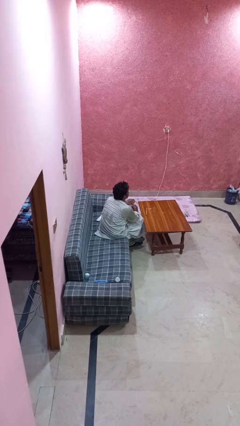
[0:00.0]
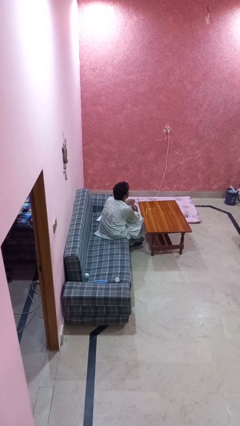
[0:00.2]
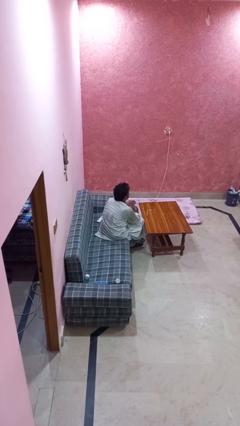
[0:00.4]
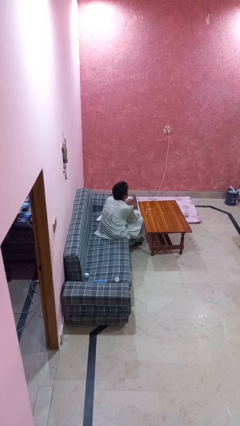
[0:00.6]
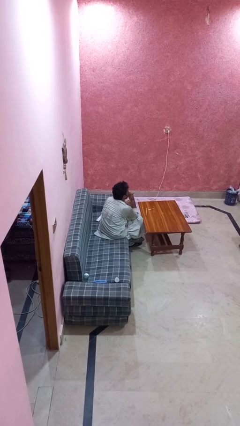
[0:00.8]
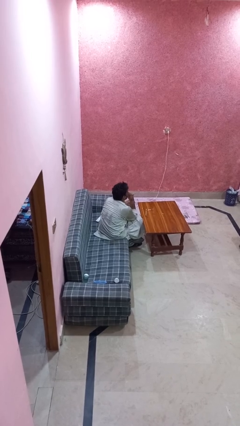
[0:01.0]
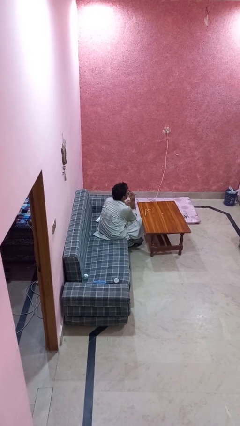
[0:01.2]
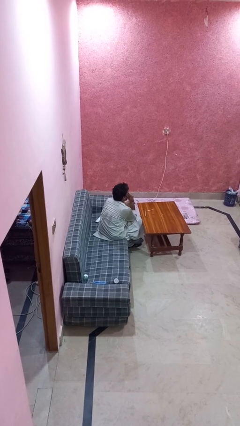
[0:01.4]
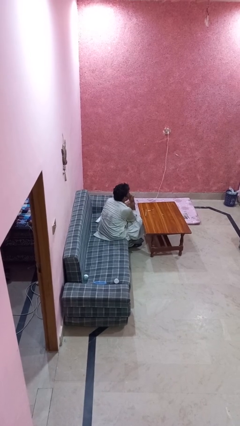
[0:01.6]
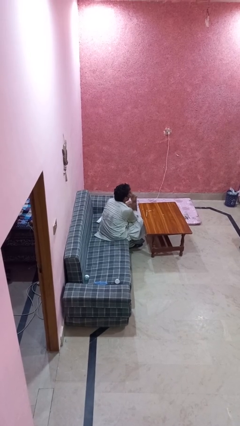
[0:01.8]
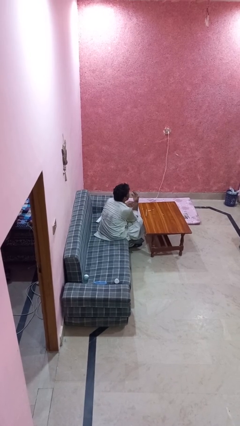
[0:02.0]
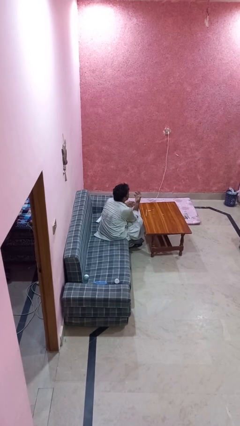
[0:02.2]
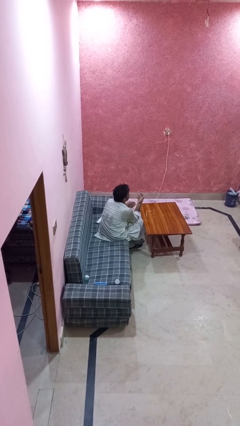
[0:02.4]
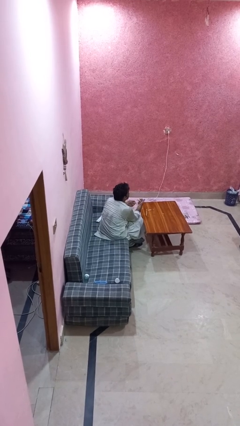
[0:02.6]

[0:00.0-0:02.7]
person licks fingers

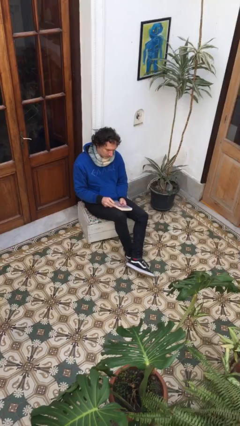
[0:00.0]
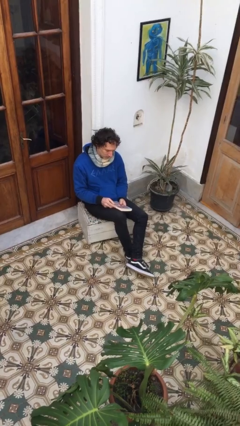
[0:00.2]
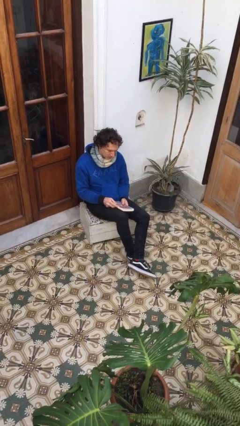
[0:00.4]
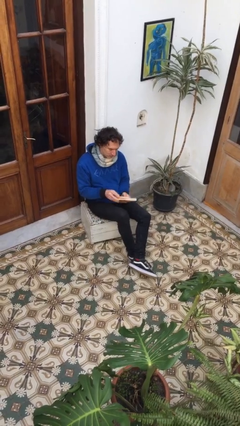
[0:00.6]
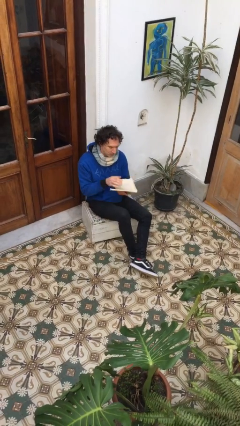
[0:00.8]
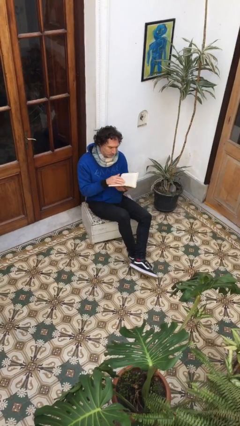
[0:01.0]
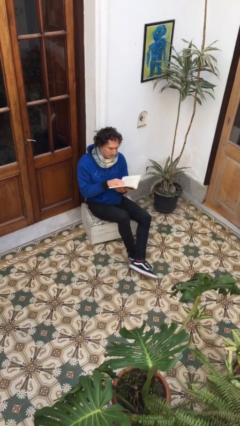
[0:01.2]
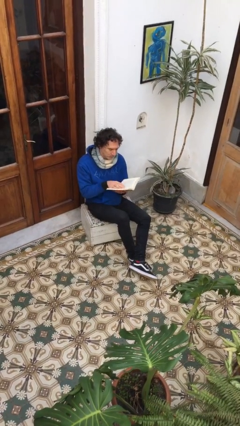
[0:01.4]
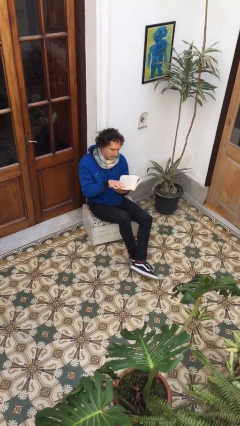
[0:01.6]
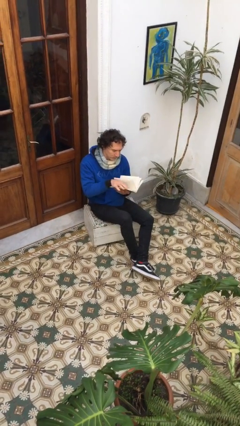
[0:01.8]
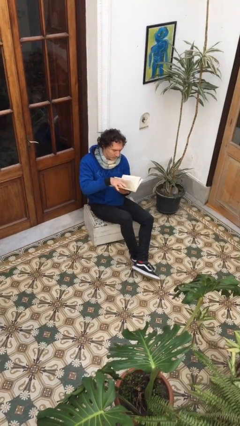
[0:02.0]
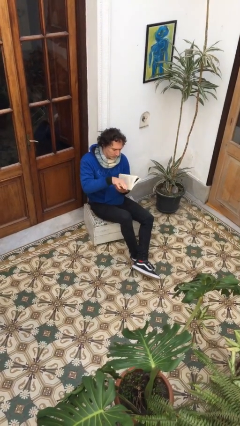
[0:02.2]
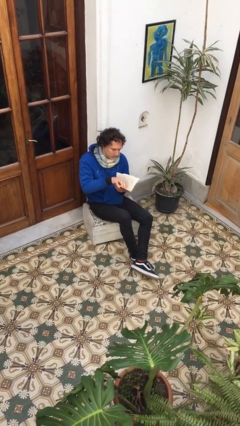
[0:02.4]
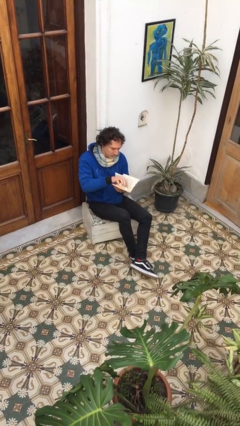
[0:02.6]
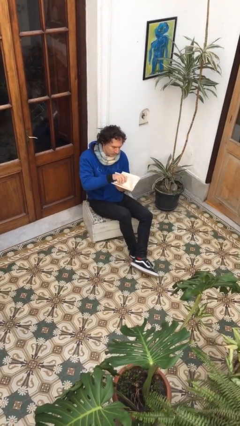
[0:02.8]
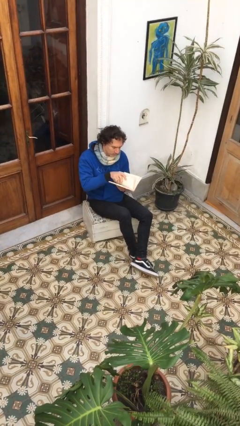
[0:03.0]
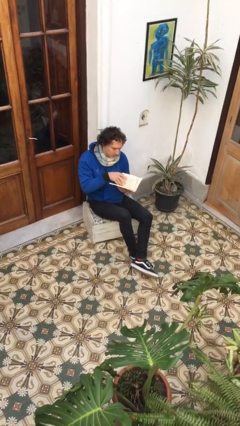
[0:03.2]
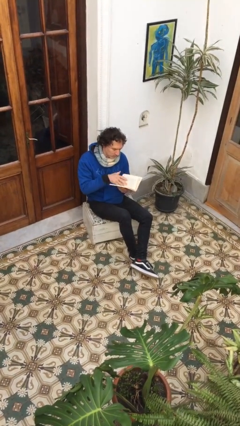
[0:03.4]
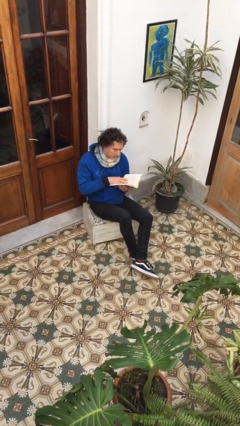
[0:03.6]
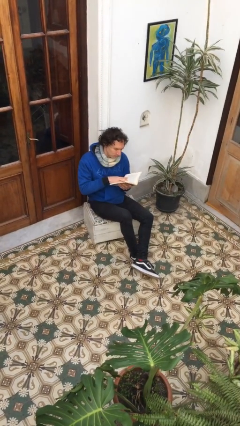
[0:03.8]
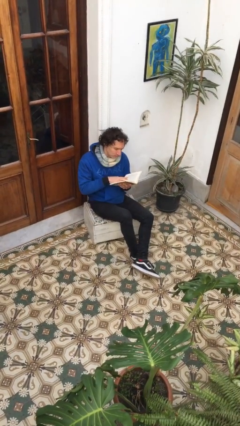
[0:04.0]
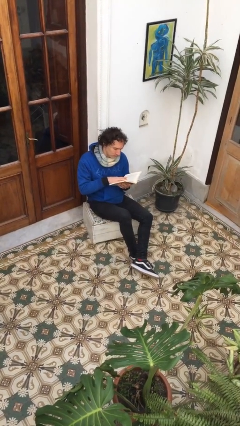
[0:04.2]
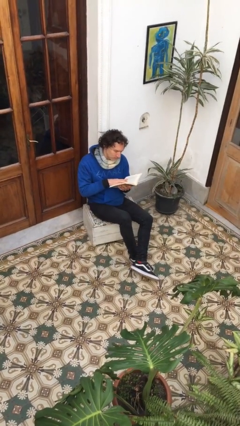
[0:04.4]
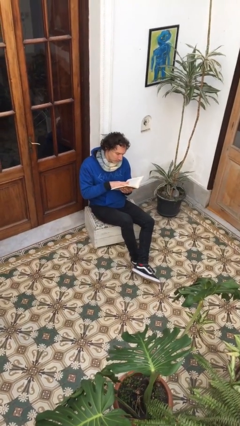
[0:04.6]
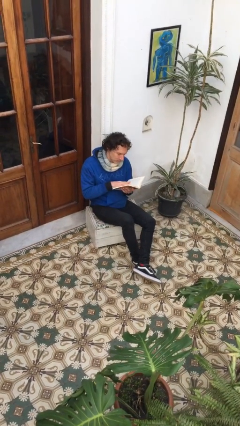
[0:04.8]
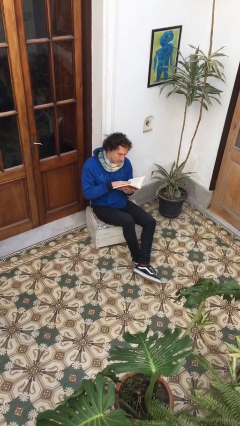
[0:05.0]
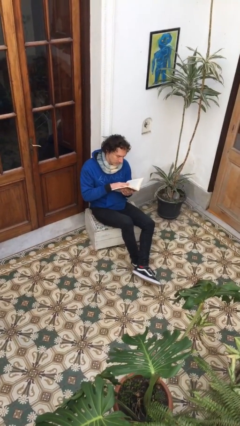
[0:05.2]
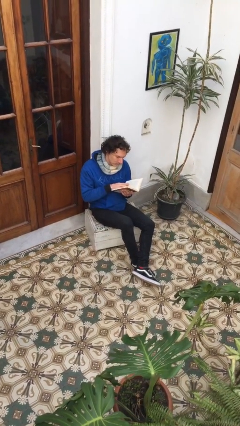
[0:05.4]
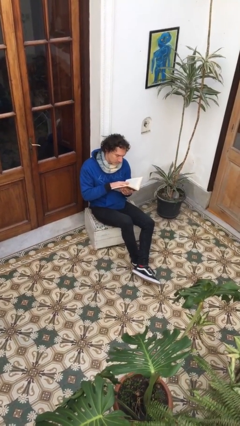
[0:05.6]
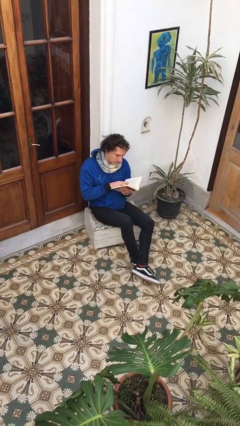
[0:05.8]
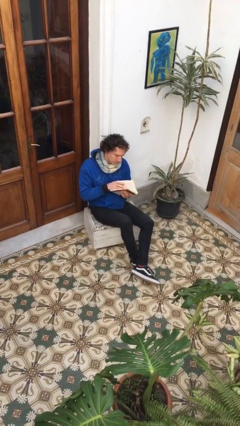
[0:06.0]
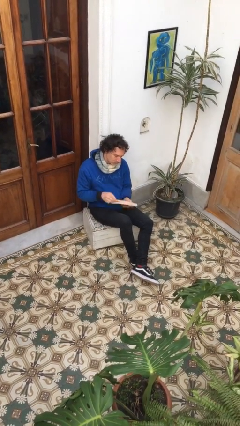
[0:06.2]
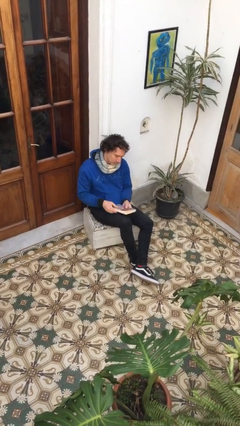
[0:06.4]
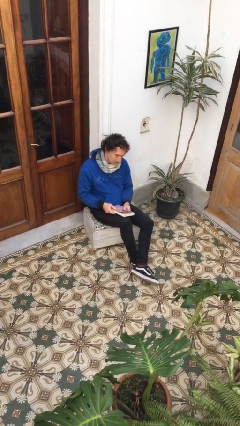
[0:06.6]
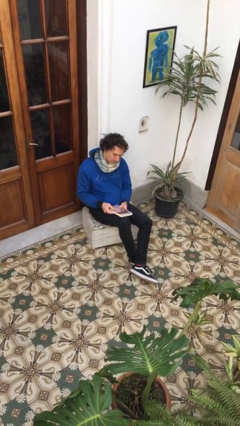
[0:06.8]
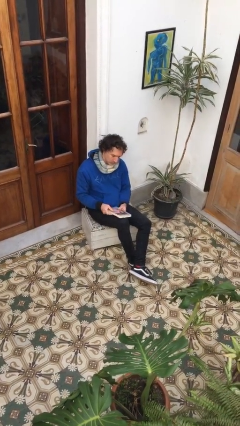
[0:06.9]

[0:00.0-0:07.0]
person reads book

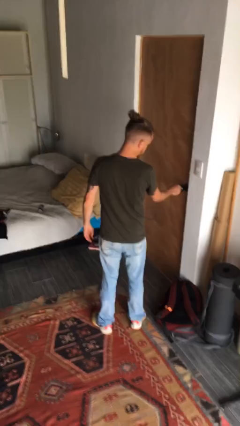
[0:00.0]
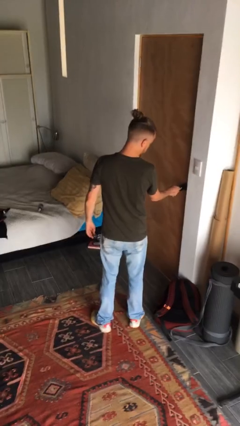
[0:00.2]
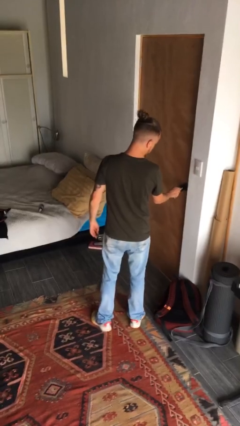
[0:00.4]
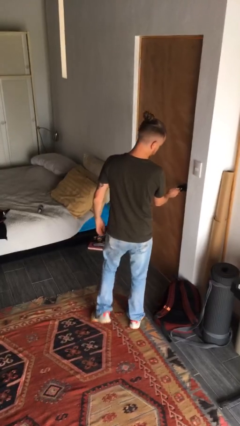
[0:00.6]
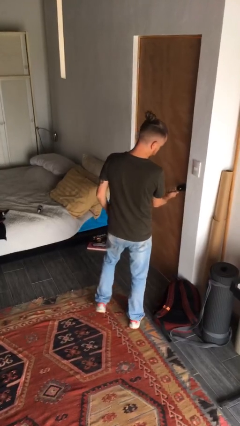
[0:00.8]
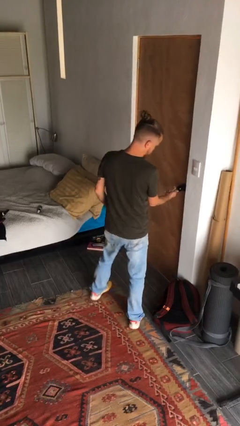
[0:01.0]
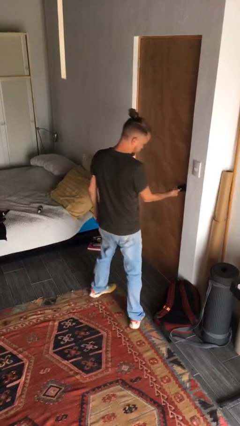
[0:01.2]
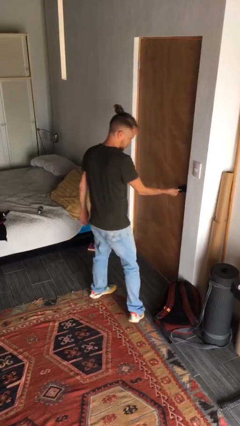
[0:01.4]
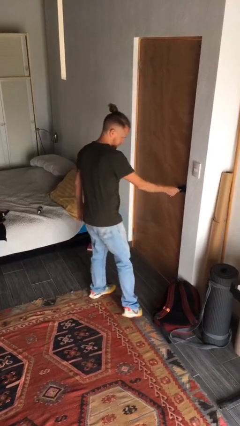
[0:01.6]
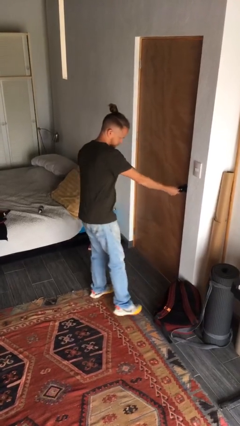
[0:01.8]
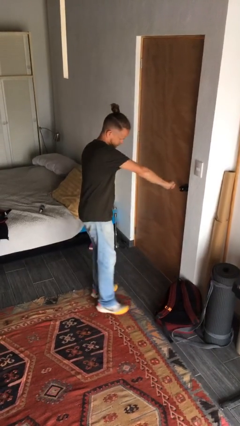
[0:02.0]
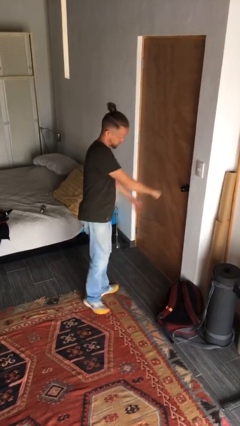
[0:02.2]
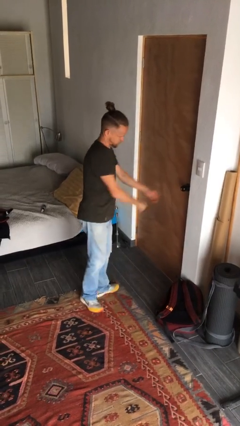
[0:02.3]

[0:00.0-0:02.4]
person unlocks door with keys

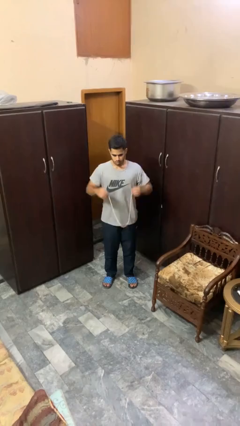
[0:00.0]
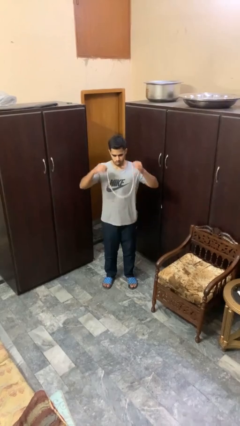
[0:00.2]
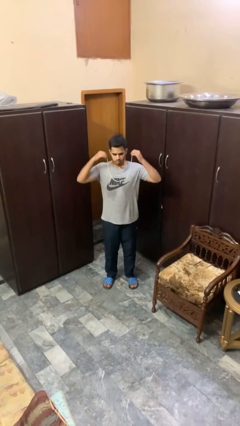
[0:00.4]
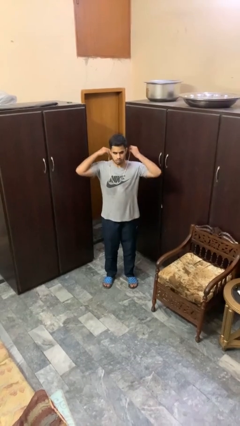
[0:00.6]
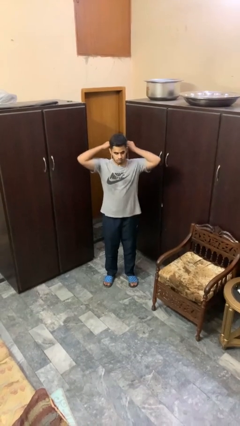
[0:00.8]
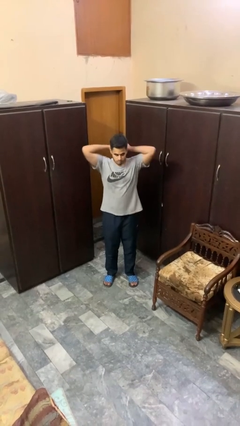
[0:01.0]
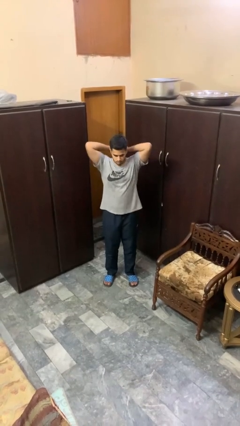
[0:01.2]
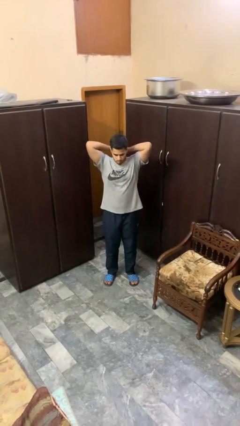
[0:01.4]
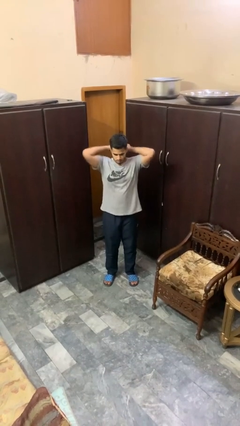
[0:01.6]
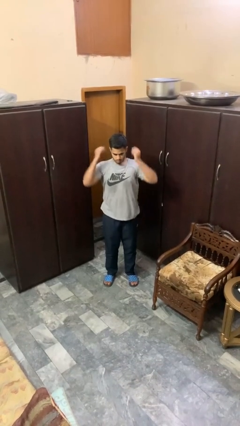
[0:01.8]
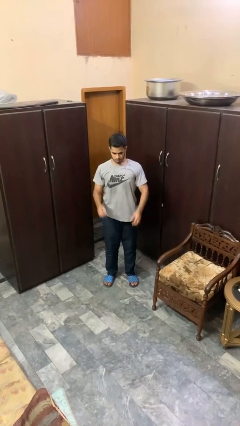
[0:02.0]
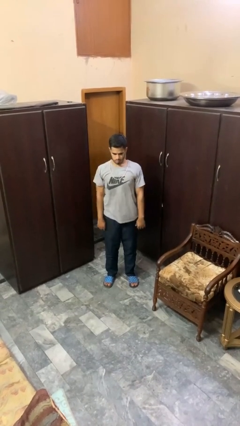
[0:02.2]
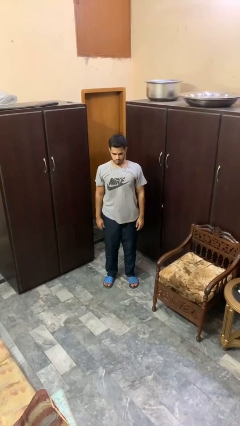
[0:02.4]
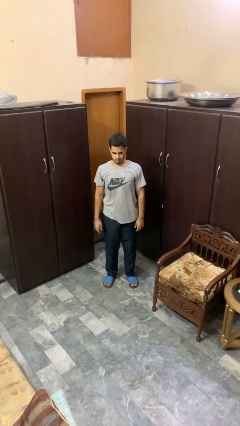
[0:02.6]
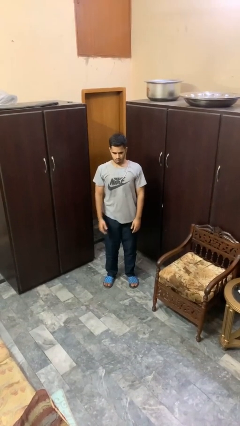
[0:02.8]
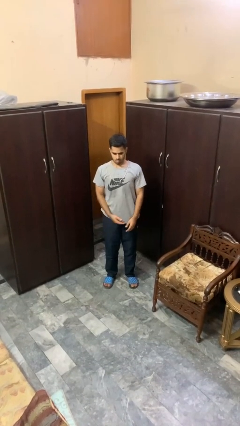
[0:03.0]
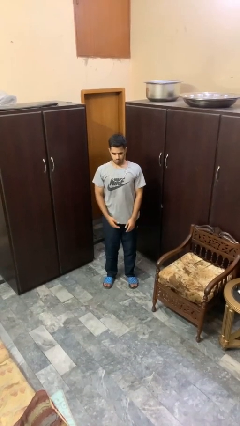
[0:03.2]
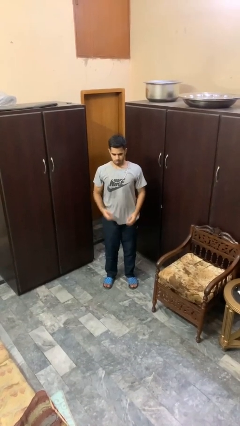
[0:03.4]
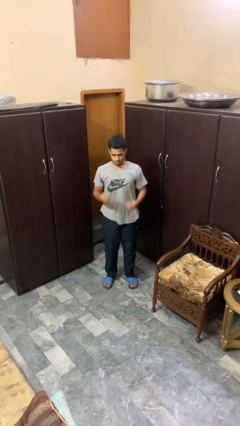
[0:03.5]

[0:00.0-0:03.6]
person puts on necklace

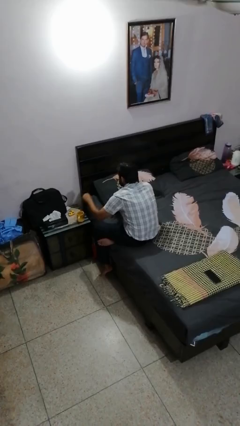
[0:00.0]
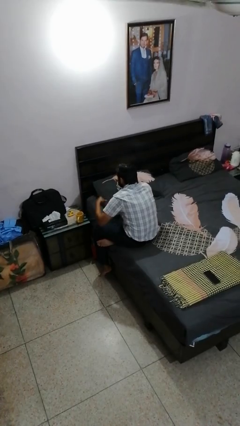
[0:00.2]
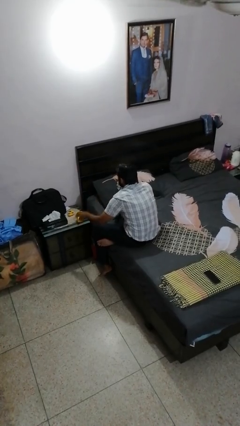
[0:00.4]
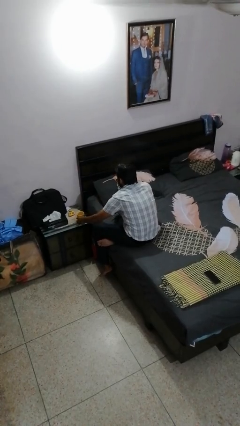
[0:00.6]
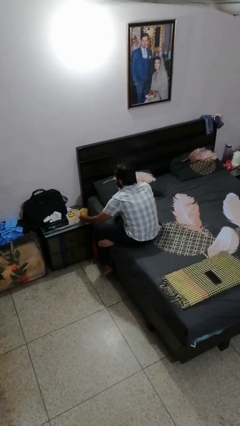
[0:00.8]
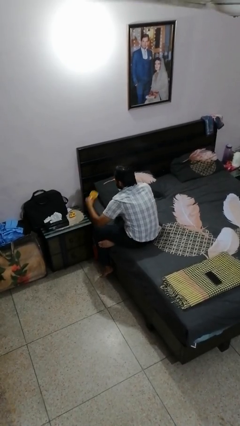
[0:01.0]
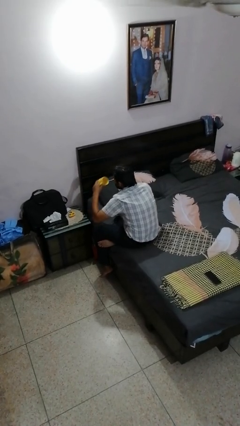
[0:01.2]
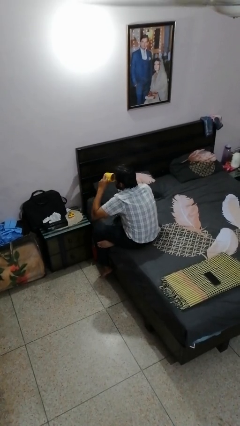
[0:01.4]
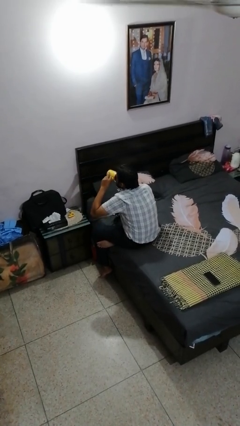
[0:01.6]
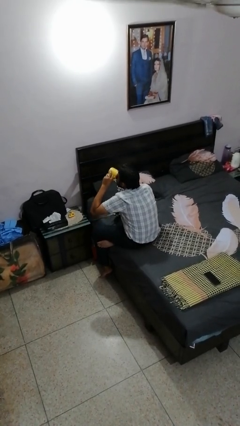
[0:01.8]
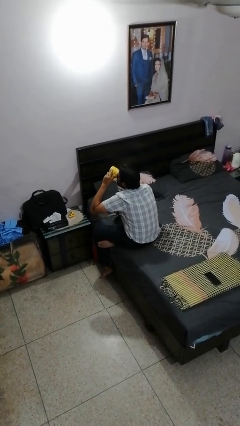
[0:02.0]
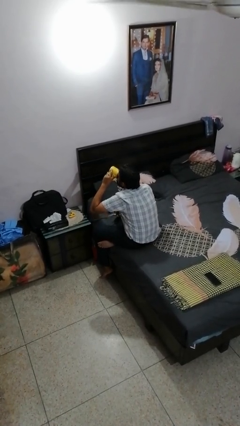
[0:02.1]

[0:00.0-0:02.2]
person drinks from mug

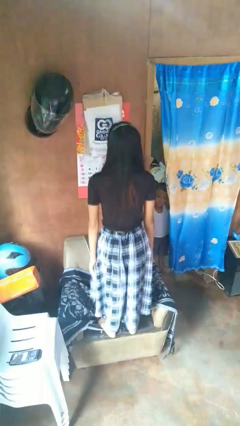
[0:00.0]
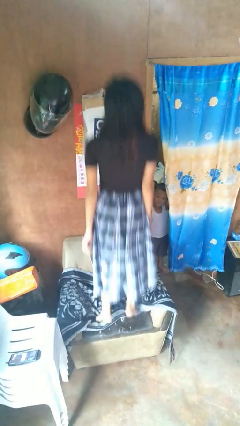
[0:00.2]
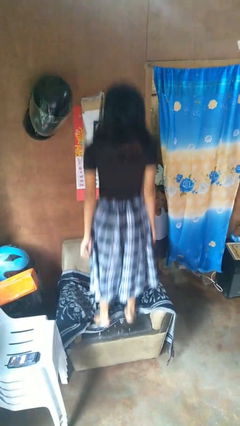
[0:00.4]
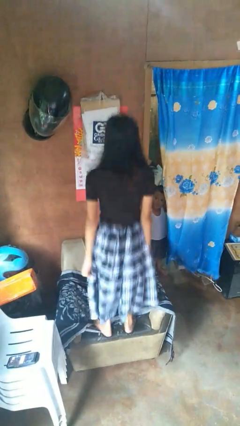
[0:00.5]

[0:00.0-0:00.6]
person jumps on couch
